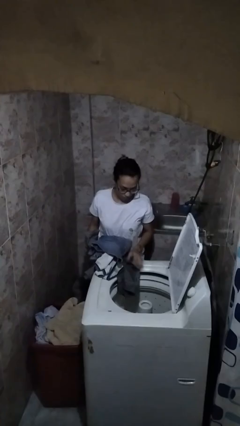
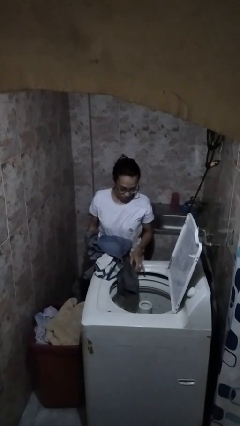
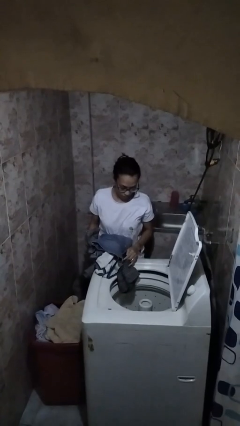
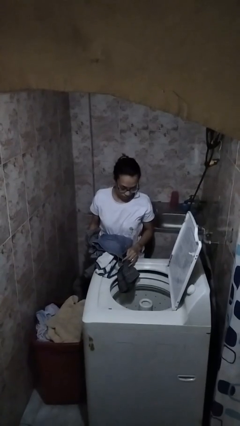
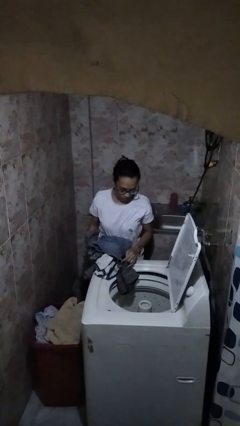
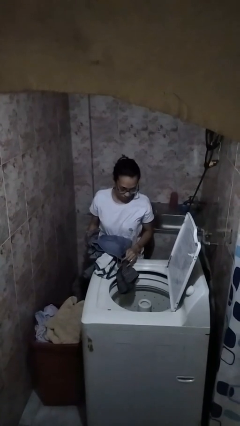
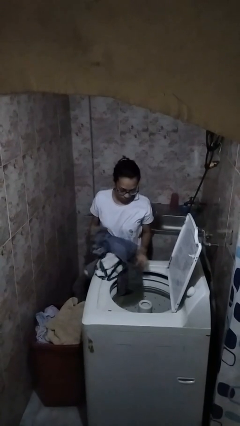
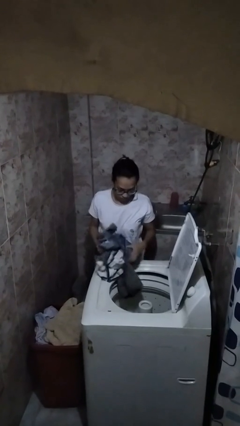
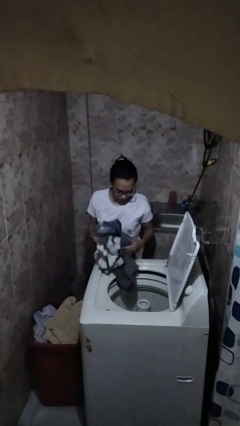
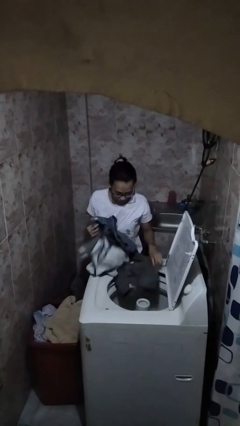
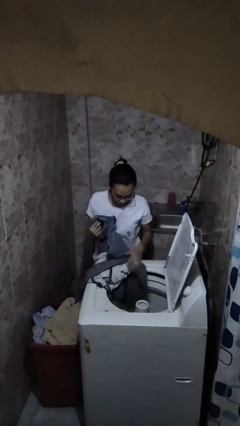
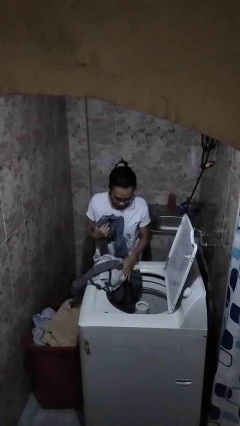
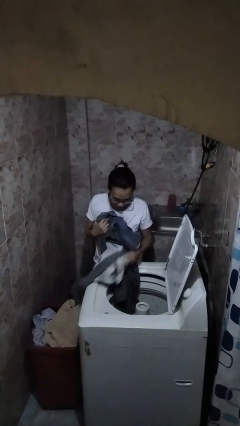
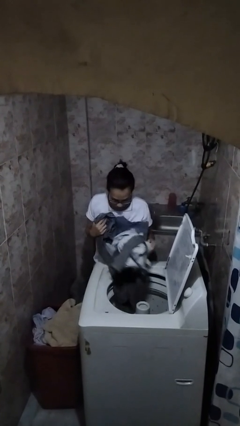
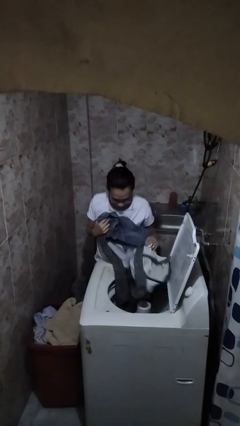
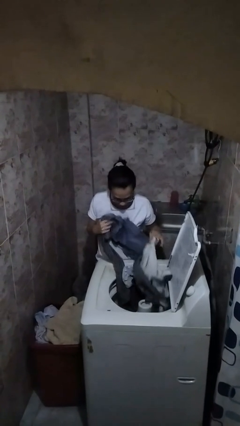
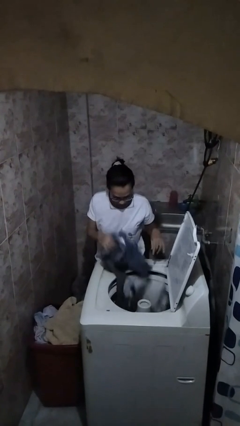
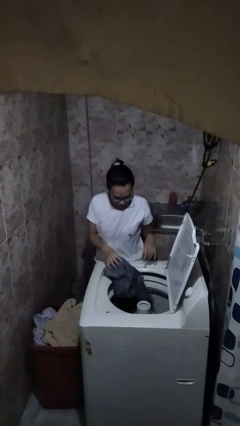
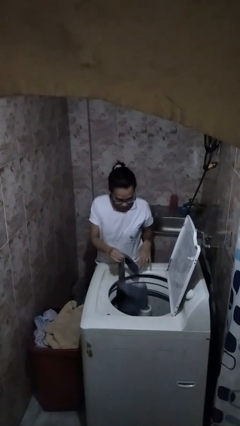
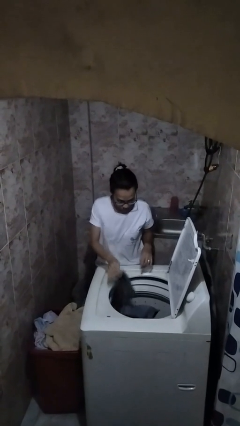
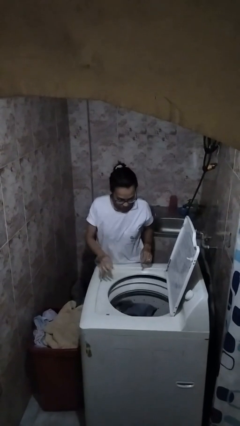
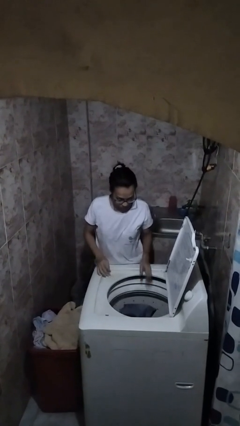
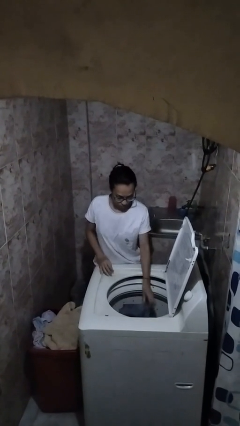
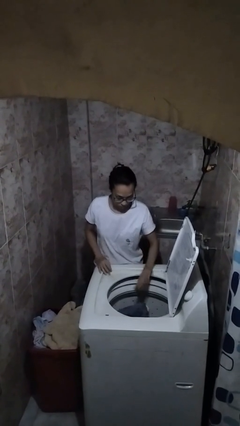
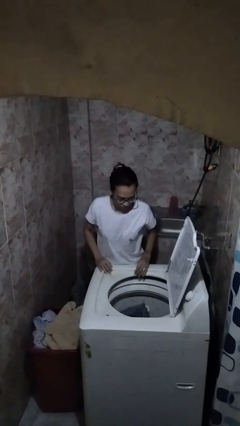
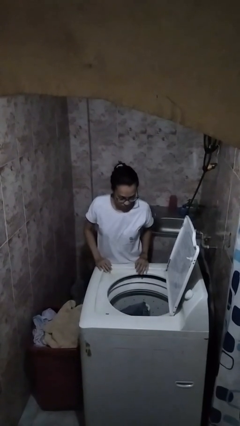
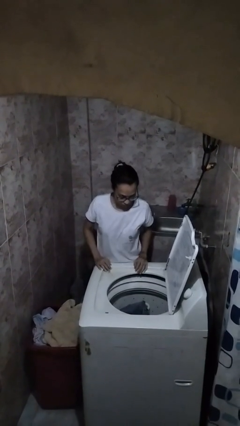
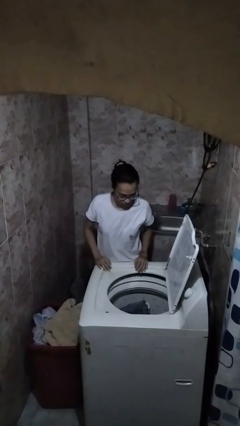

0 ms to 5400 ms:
person unloads clotheswasher

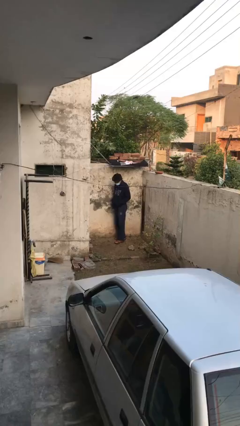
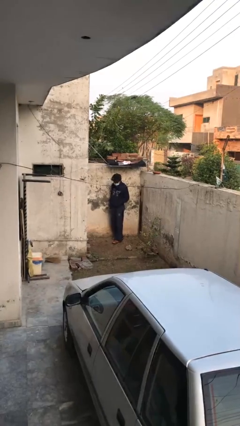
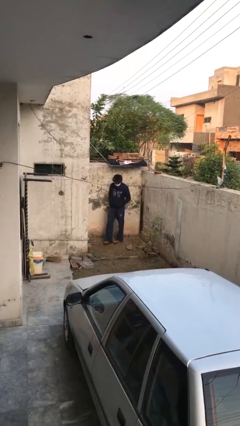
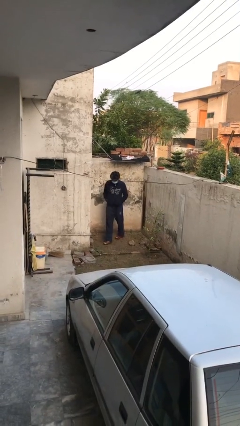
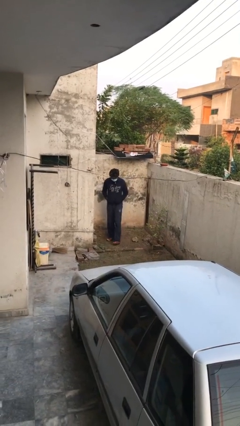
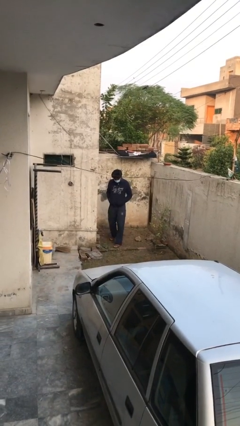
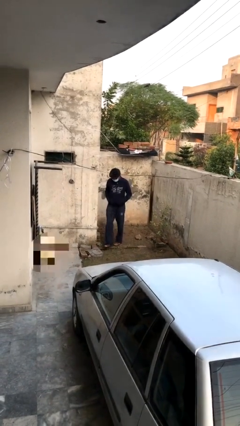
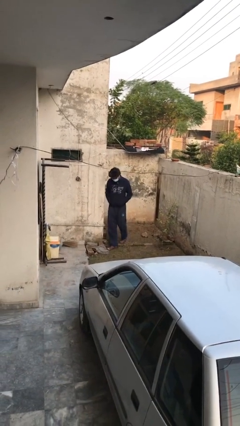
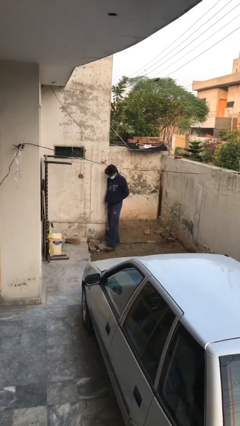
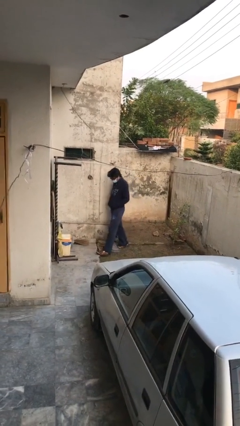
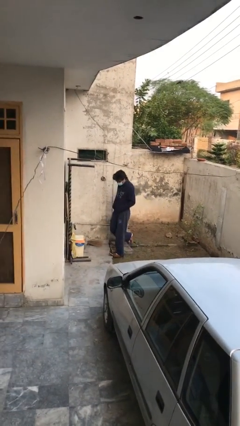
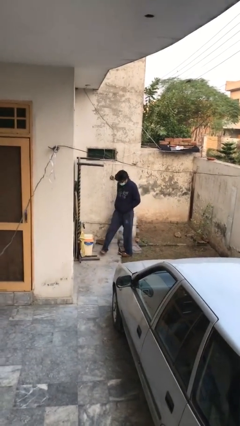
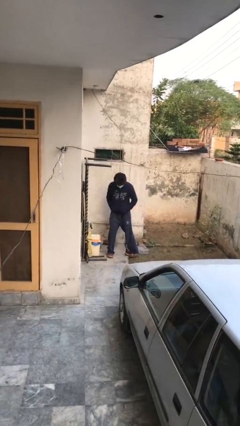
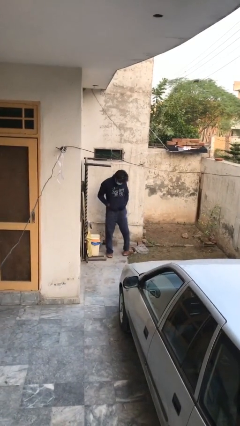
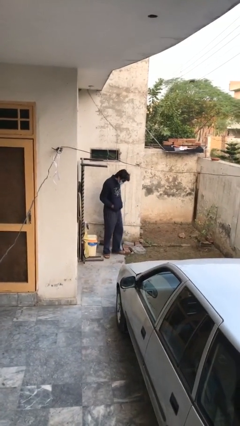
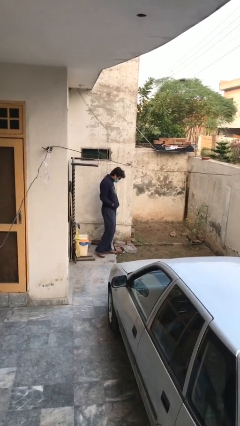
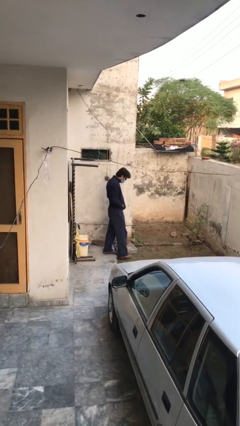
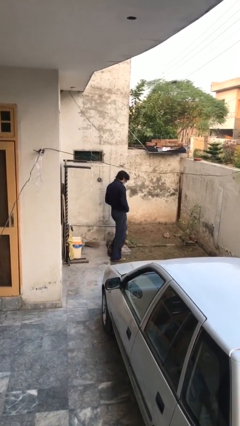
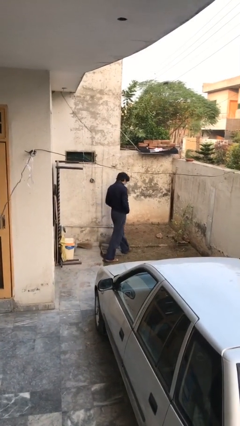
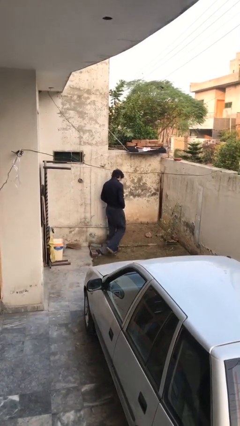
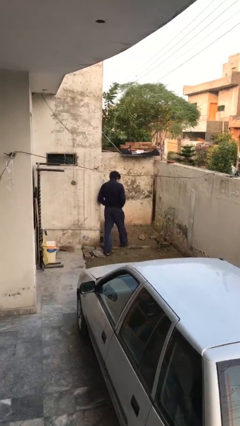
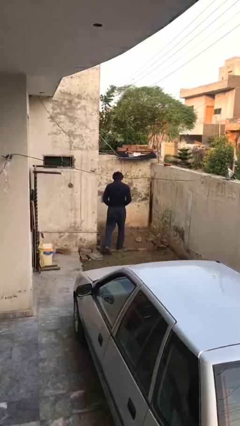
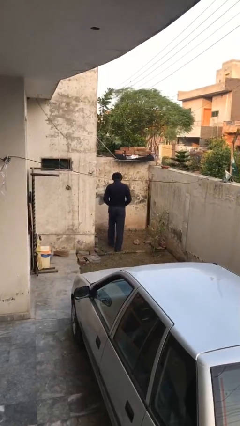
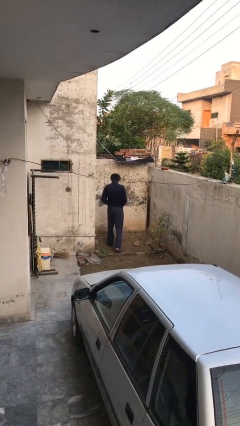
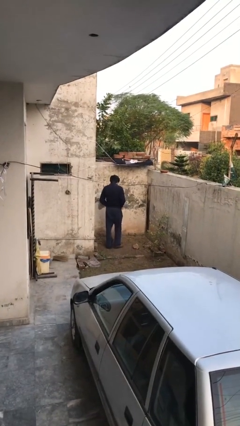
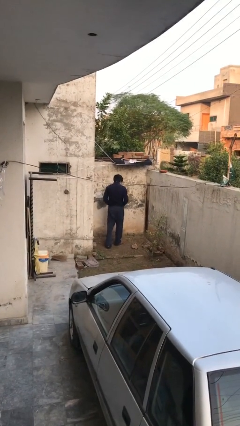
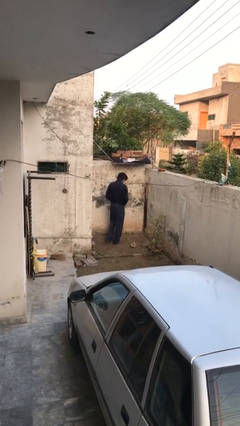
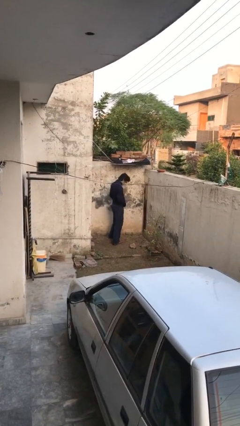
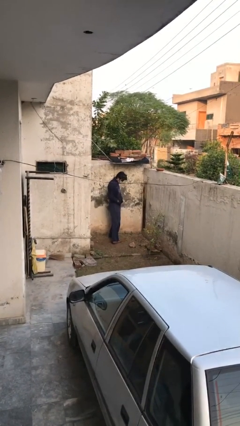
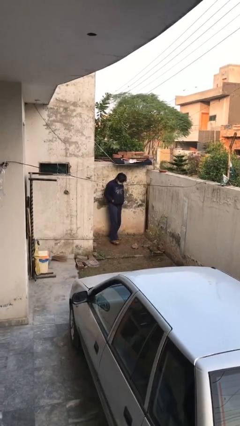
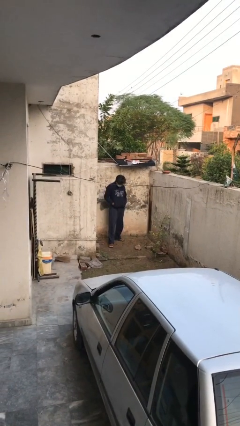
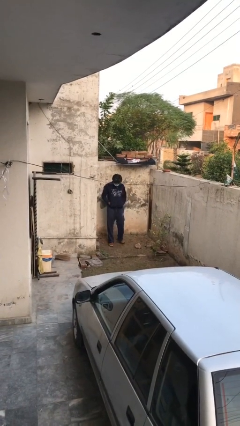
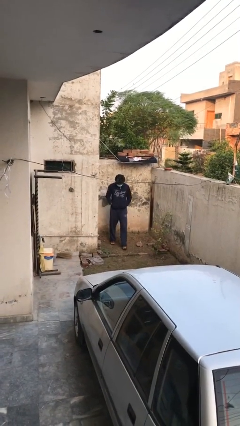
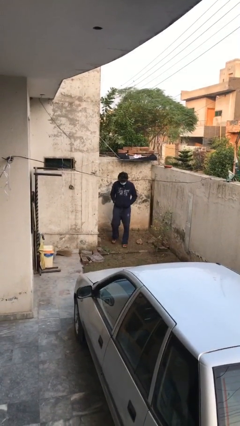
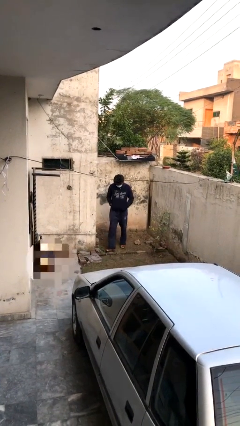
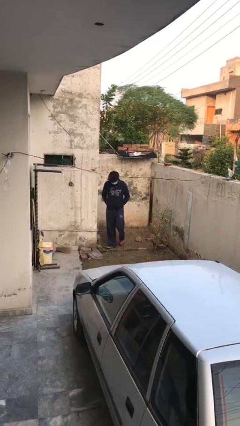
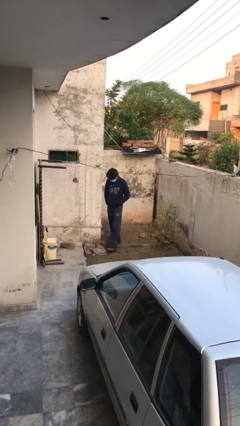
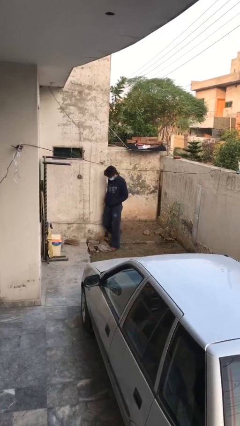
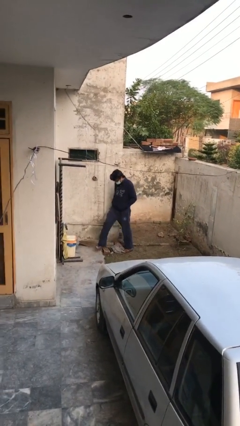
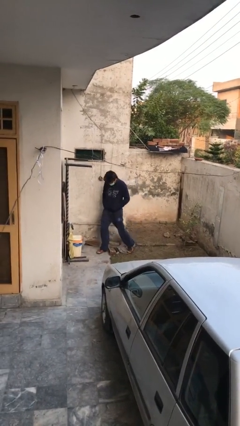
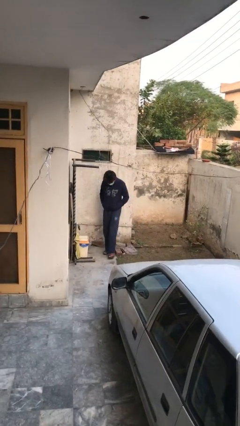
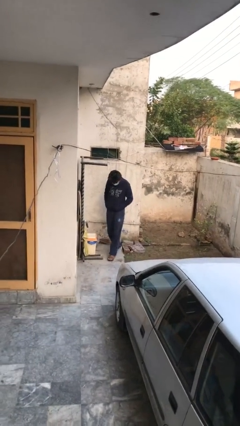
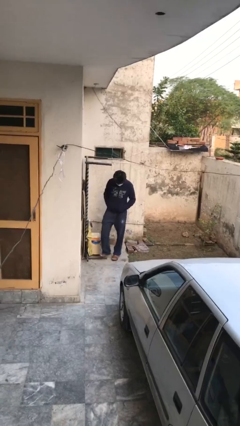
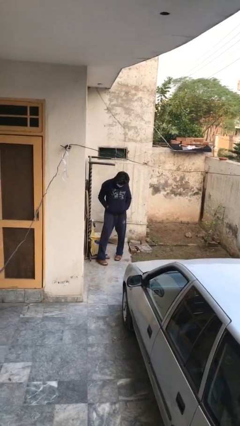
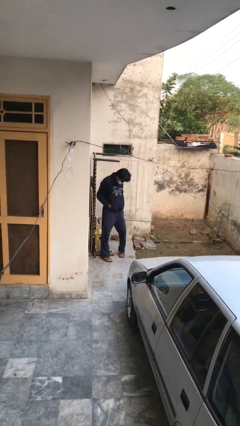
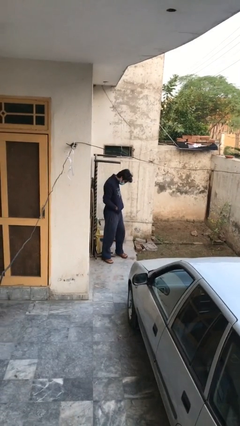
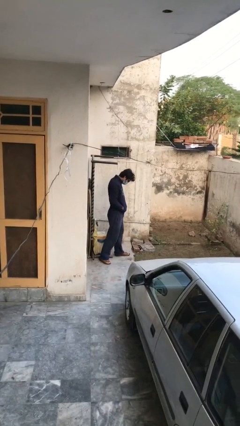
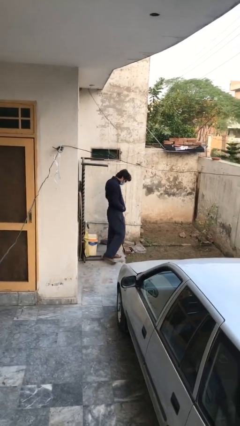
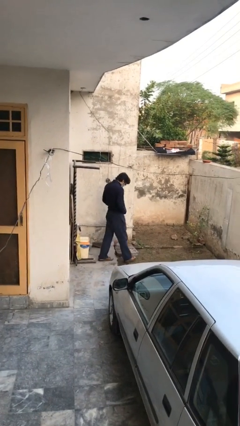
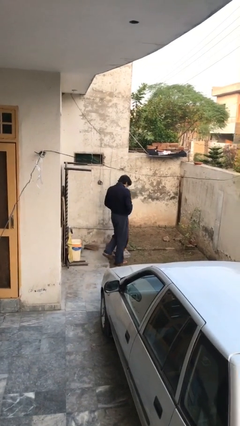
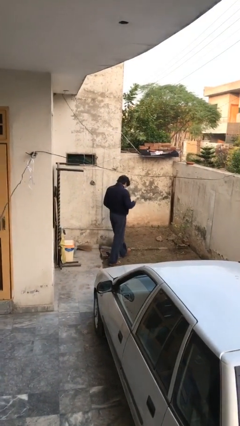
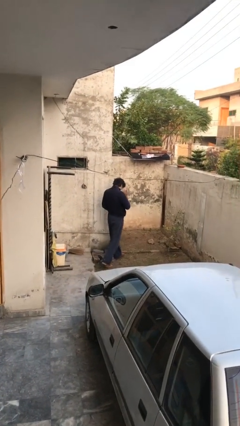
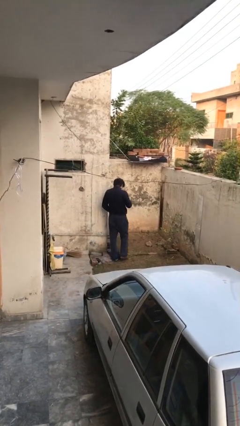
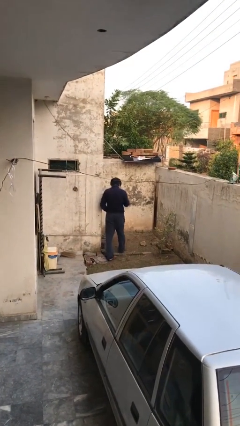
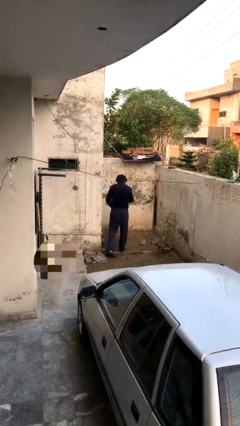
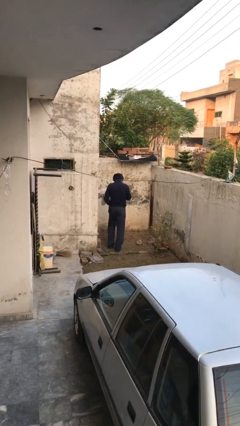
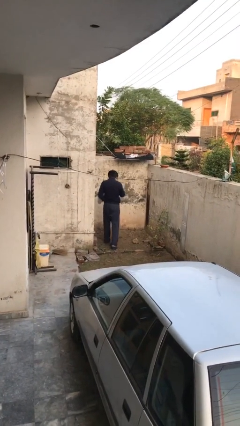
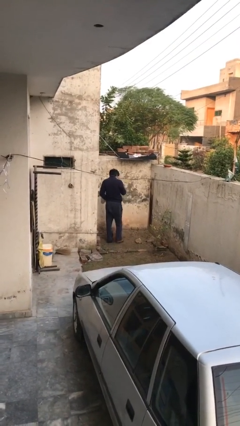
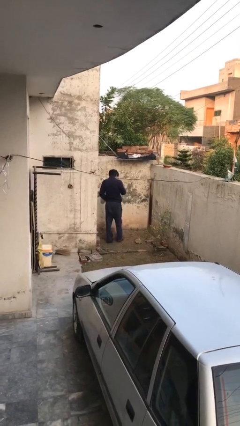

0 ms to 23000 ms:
person walks

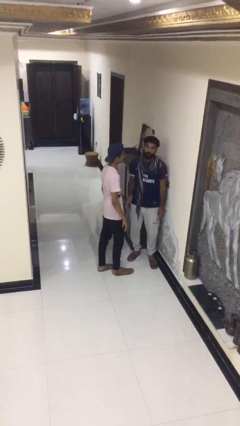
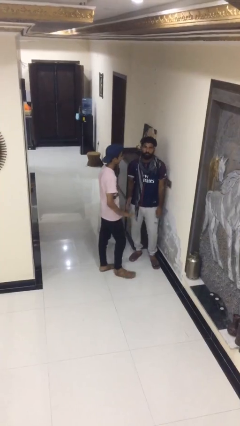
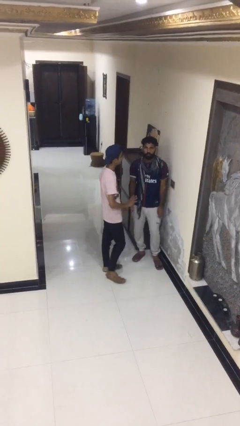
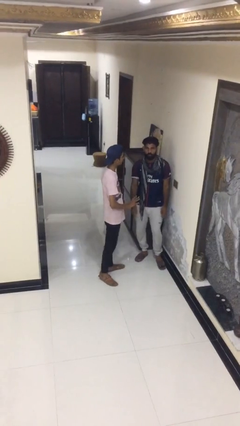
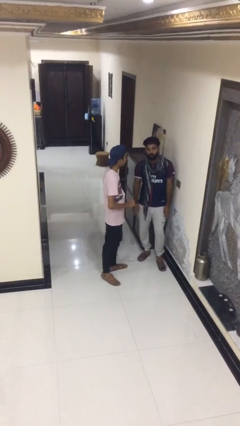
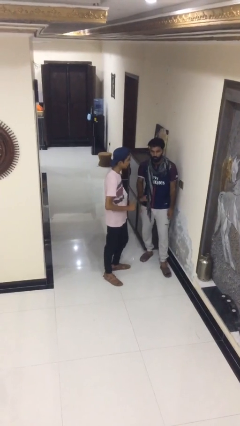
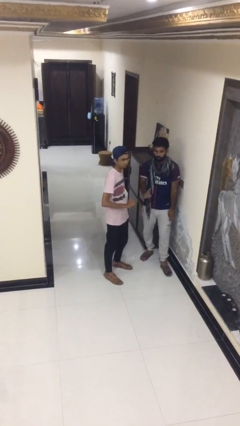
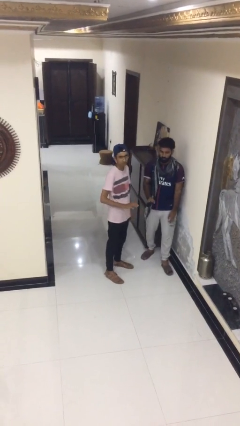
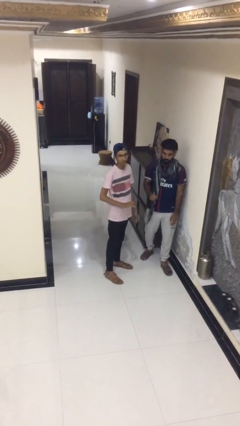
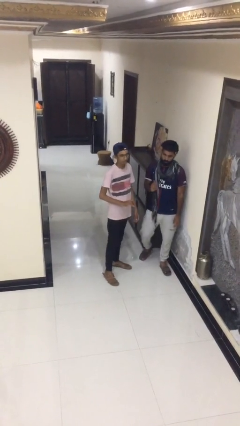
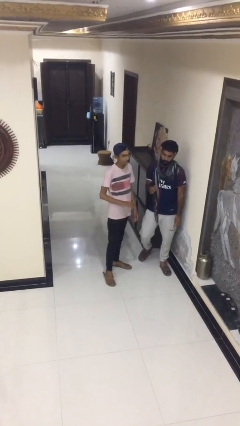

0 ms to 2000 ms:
person talks to person
